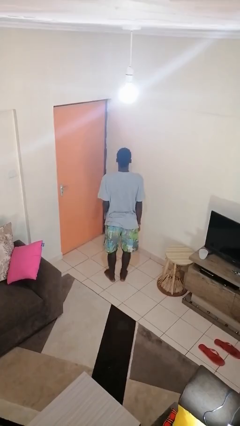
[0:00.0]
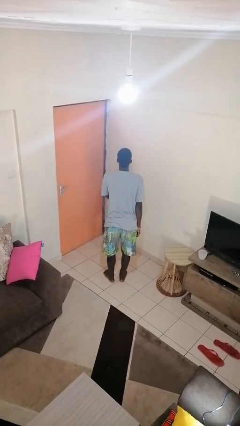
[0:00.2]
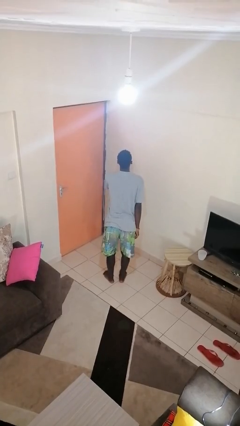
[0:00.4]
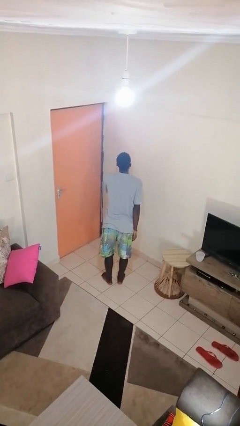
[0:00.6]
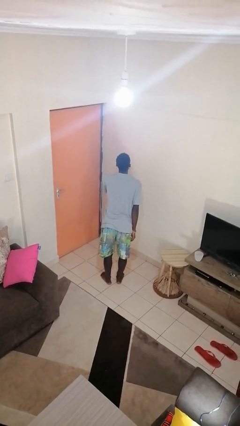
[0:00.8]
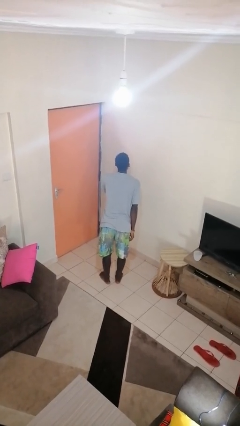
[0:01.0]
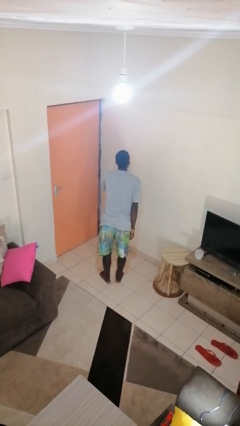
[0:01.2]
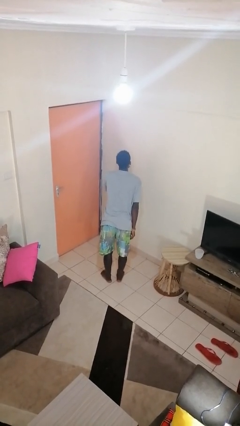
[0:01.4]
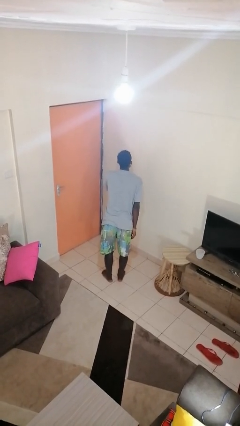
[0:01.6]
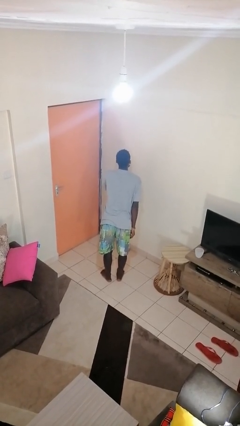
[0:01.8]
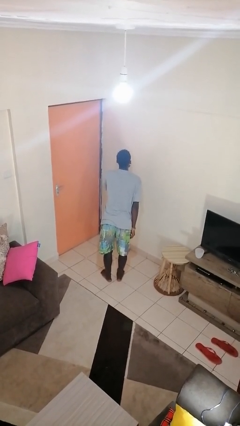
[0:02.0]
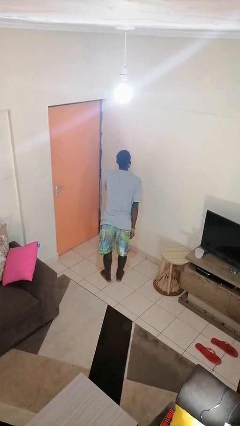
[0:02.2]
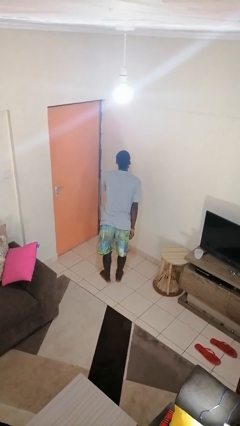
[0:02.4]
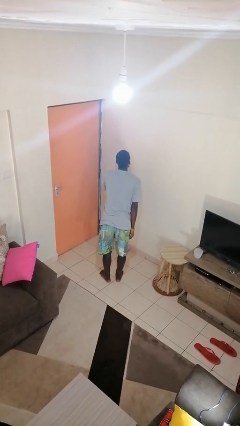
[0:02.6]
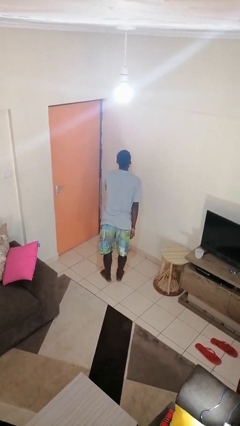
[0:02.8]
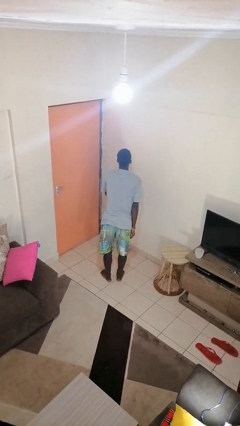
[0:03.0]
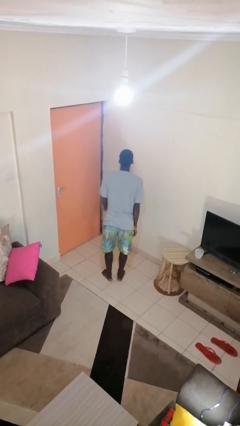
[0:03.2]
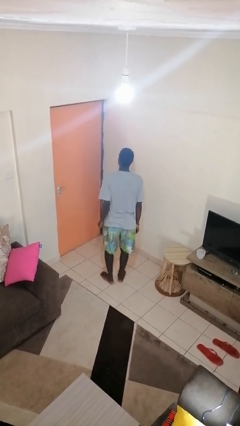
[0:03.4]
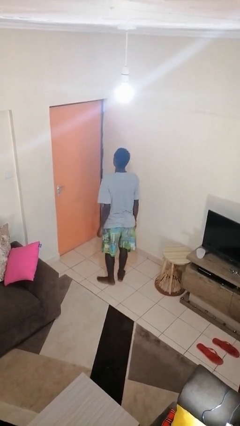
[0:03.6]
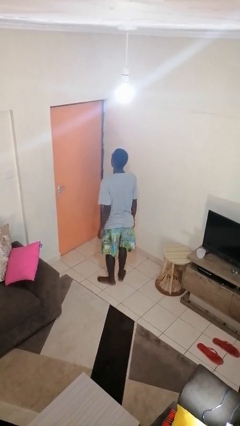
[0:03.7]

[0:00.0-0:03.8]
person gestures be quiet

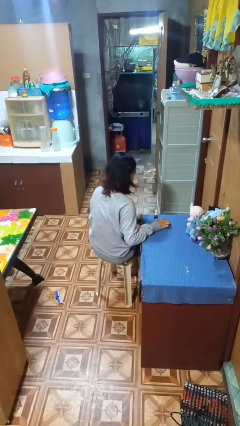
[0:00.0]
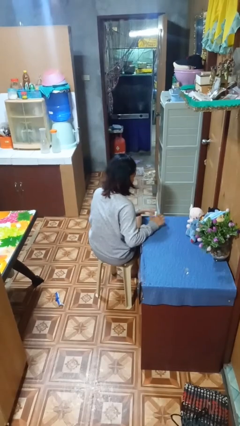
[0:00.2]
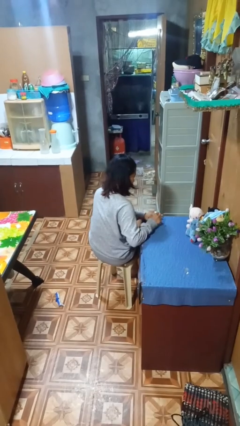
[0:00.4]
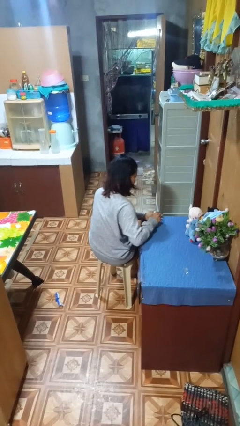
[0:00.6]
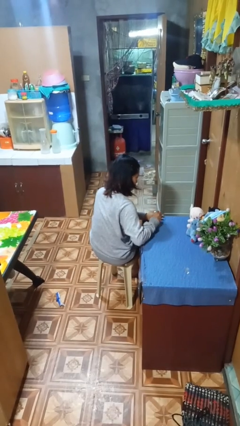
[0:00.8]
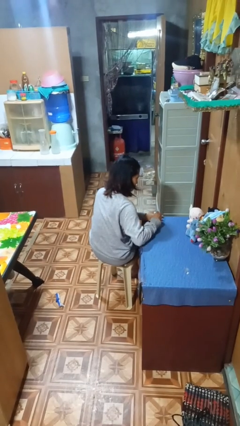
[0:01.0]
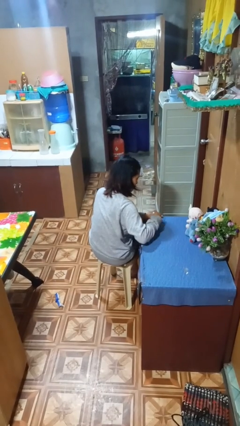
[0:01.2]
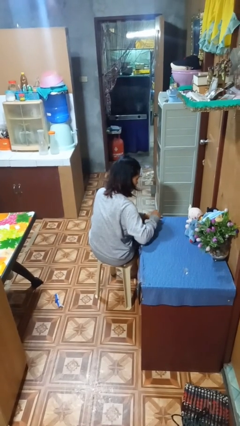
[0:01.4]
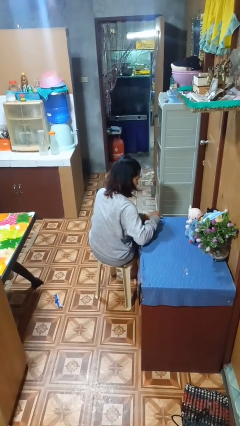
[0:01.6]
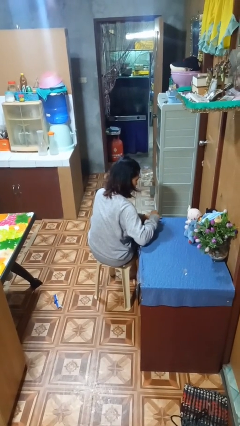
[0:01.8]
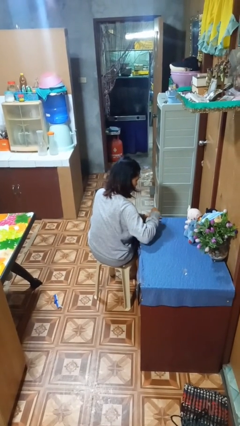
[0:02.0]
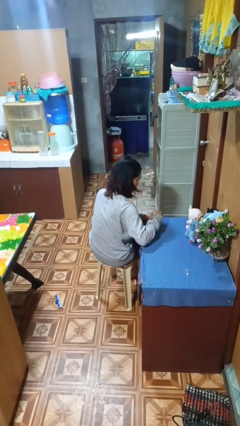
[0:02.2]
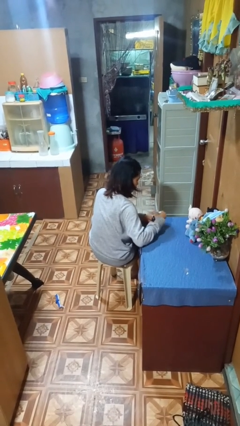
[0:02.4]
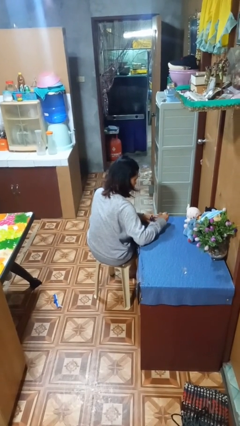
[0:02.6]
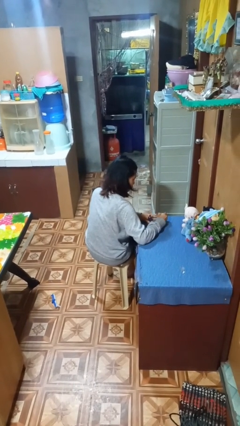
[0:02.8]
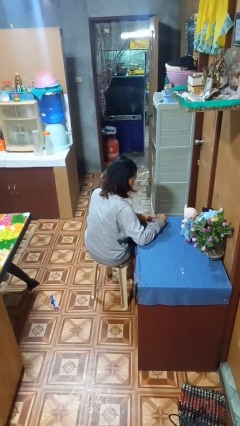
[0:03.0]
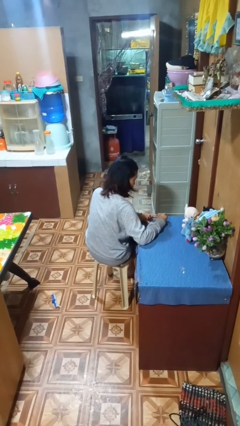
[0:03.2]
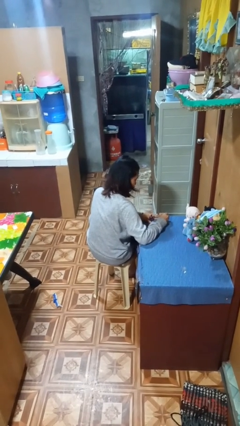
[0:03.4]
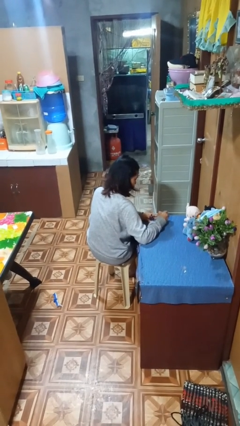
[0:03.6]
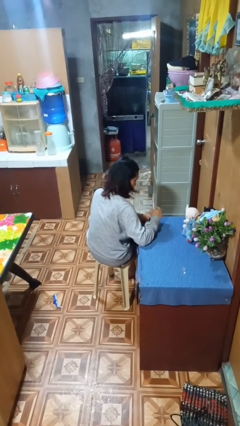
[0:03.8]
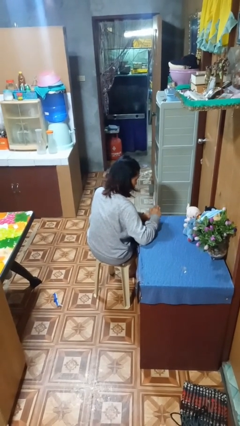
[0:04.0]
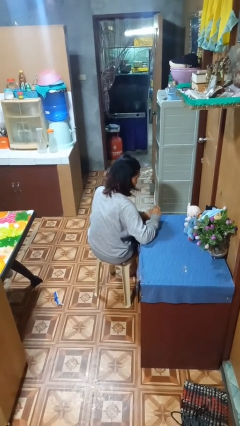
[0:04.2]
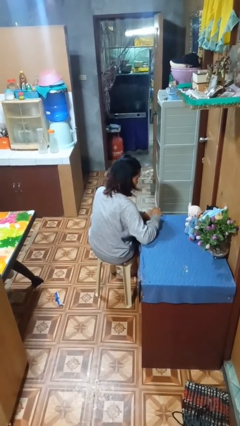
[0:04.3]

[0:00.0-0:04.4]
person paints fingernails

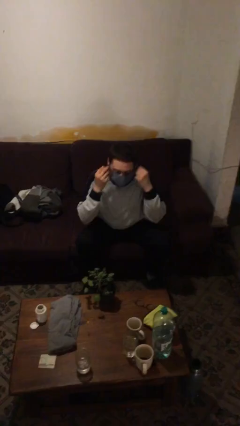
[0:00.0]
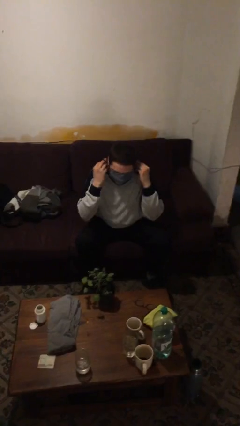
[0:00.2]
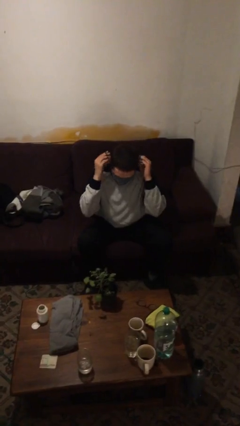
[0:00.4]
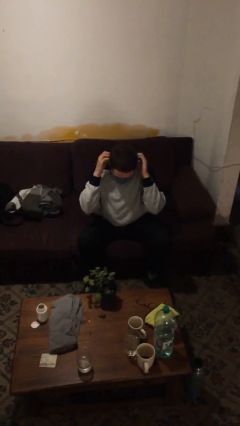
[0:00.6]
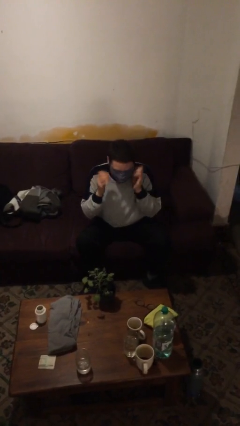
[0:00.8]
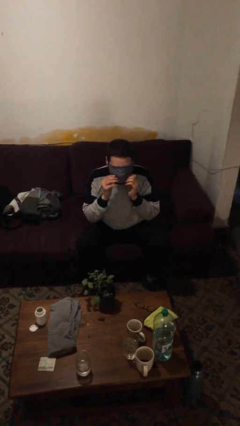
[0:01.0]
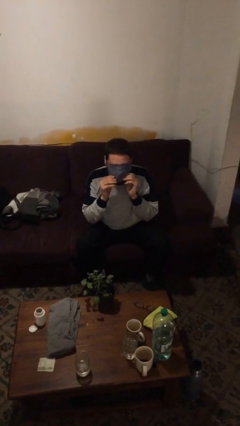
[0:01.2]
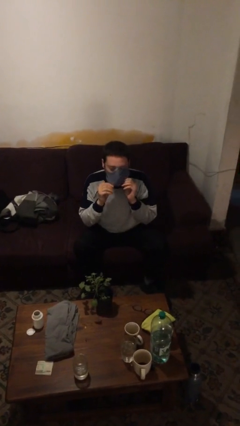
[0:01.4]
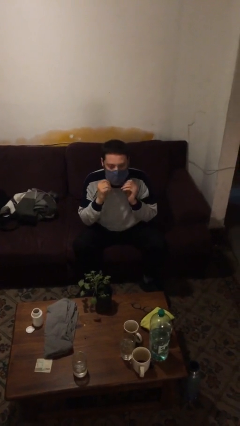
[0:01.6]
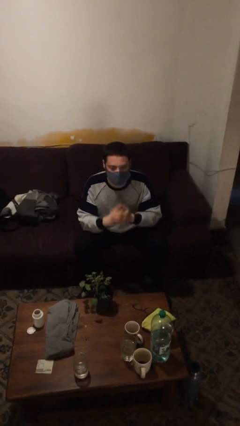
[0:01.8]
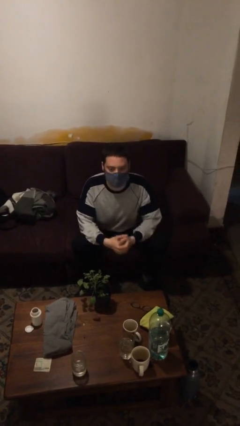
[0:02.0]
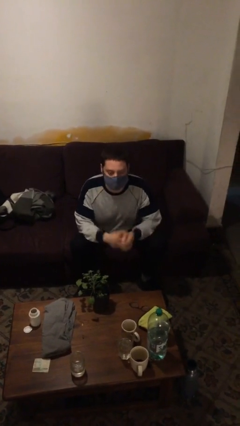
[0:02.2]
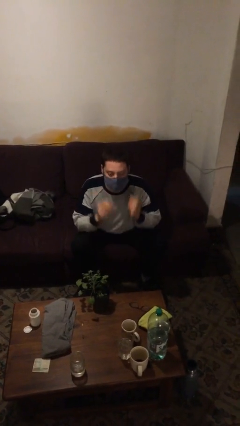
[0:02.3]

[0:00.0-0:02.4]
person puts on facemask

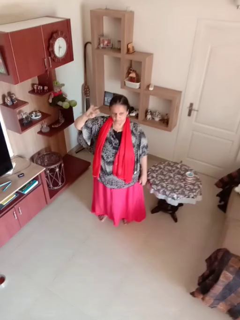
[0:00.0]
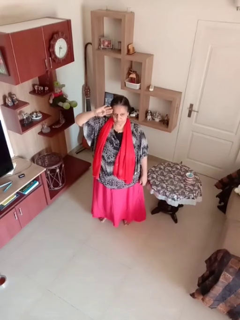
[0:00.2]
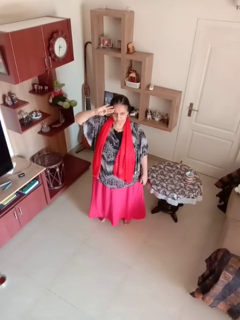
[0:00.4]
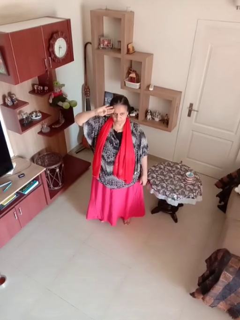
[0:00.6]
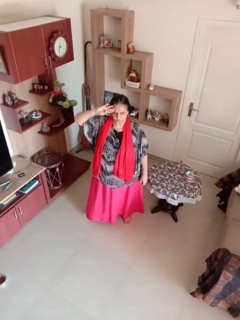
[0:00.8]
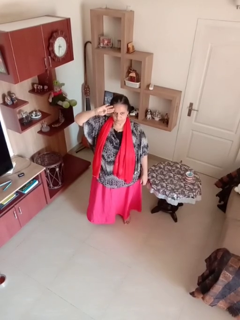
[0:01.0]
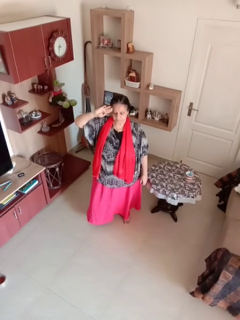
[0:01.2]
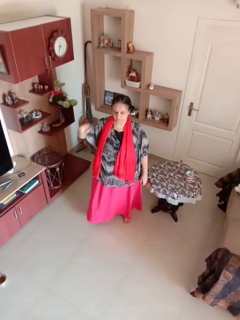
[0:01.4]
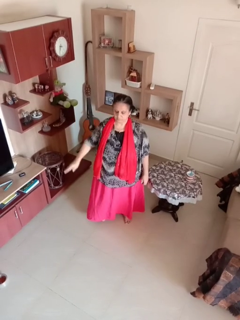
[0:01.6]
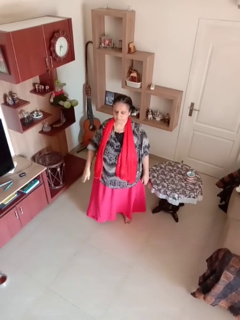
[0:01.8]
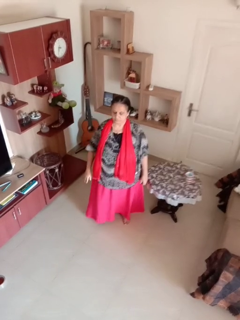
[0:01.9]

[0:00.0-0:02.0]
person salutes

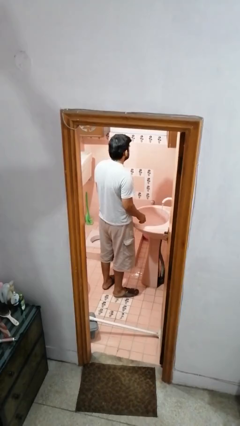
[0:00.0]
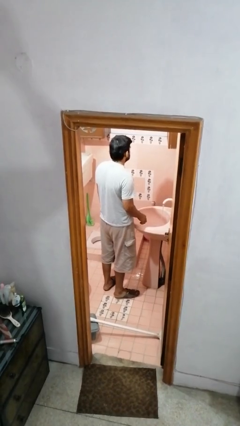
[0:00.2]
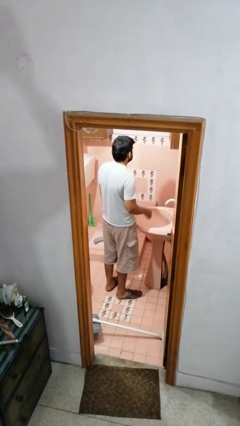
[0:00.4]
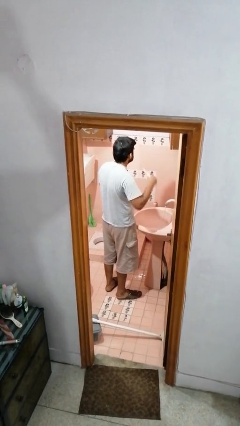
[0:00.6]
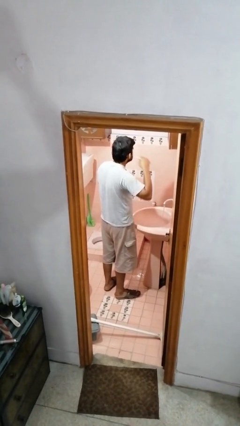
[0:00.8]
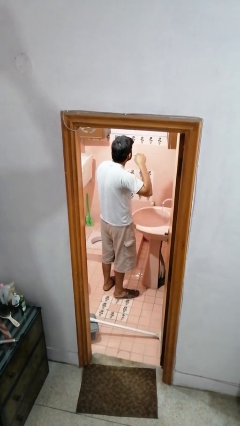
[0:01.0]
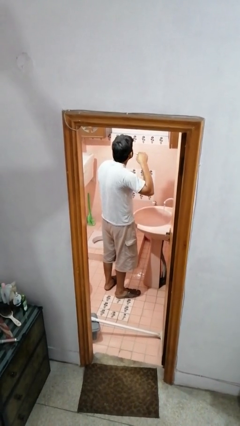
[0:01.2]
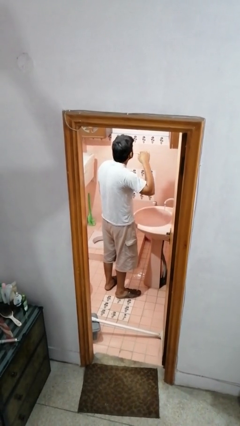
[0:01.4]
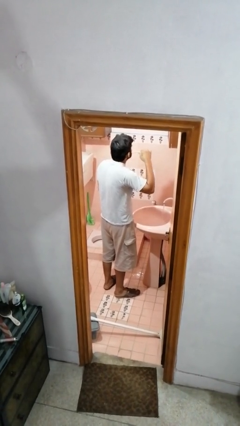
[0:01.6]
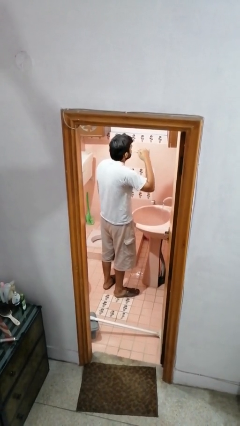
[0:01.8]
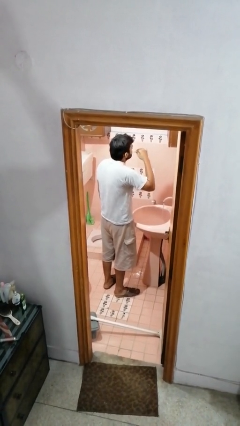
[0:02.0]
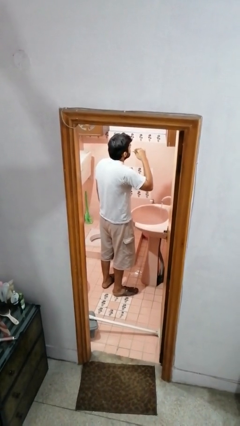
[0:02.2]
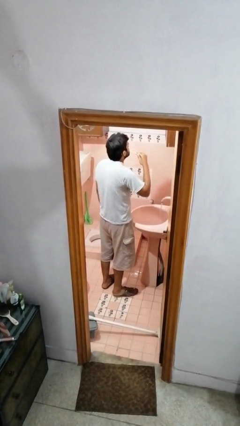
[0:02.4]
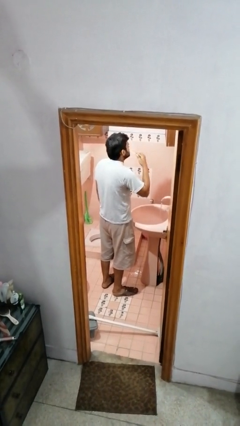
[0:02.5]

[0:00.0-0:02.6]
person brushes teeth

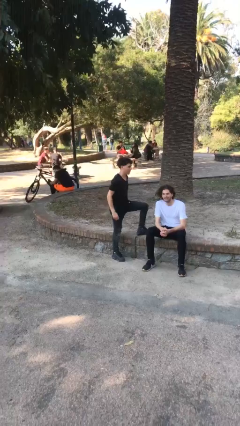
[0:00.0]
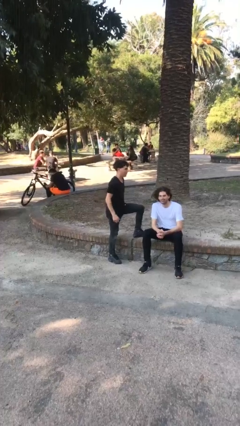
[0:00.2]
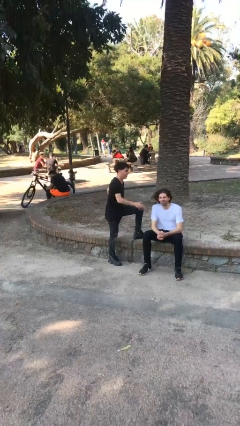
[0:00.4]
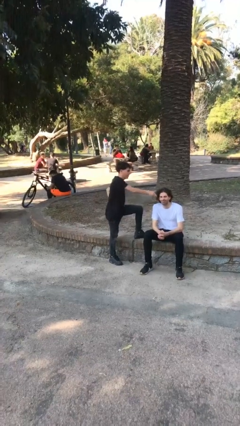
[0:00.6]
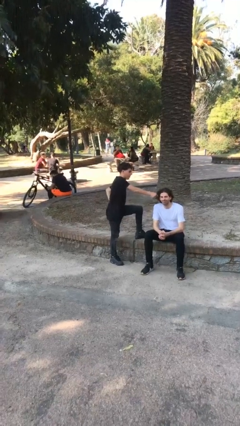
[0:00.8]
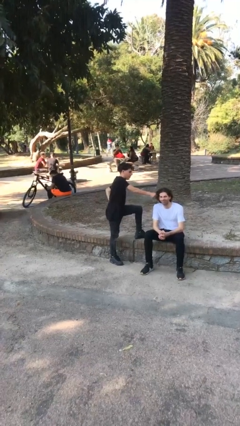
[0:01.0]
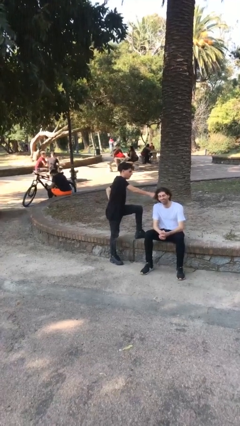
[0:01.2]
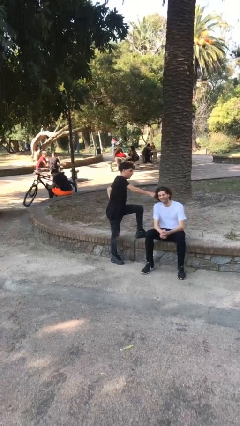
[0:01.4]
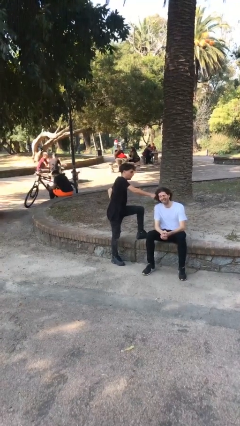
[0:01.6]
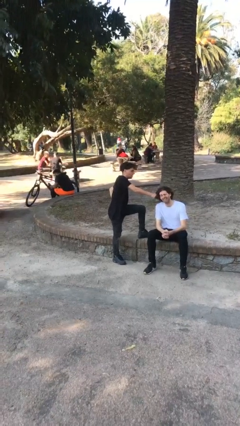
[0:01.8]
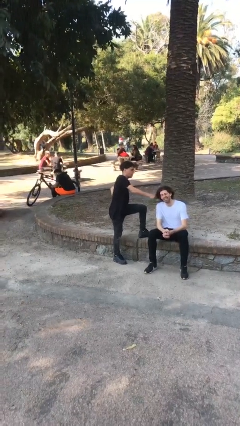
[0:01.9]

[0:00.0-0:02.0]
person grabs person by hair

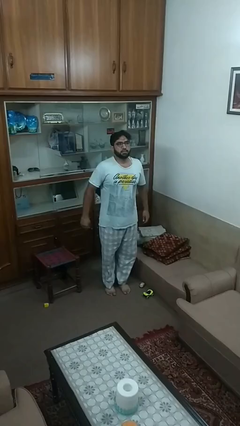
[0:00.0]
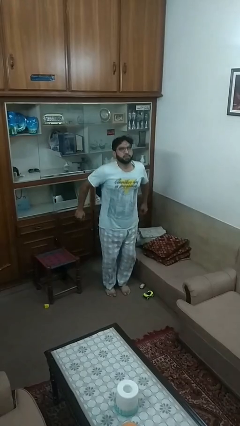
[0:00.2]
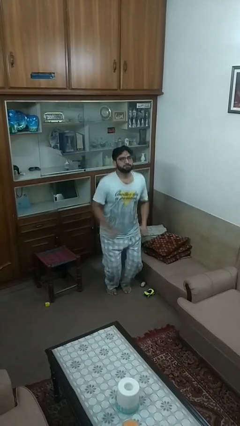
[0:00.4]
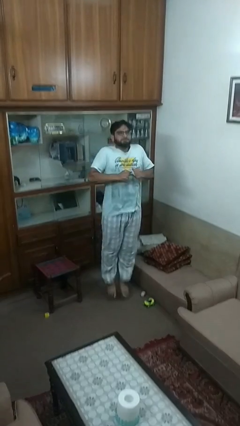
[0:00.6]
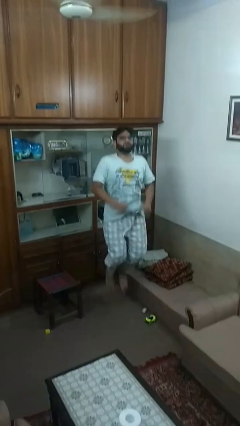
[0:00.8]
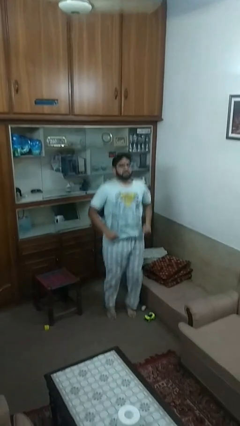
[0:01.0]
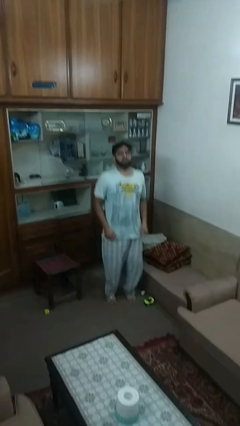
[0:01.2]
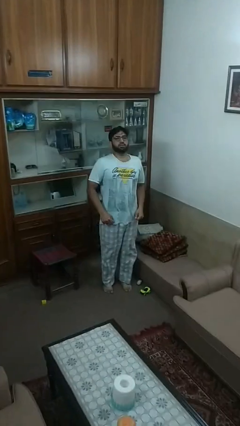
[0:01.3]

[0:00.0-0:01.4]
person jumps
